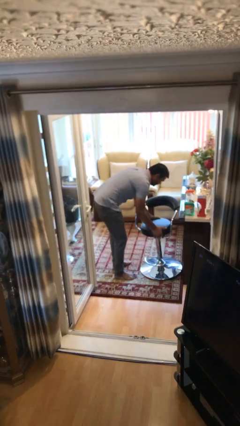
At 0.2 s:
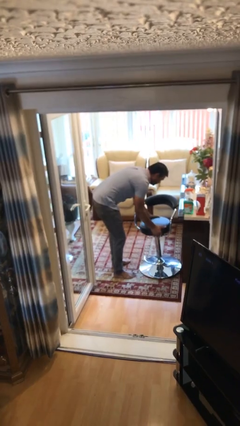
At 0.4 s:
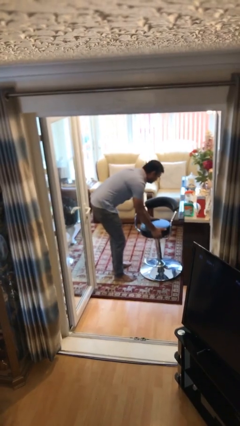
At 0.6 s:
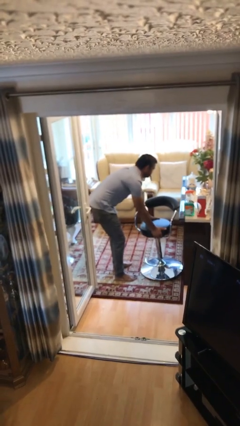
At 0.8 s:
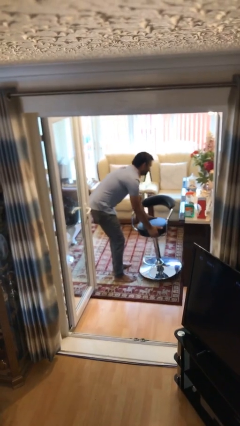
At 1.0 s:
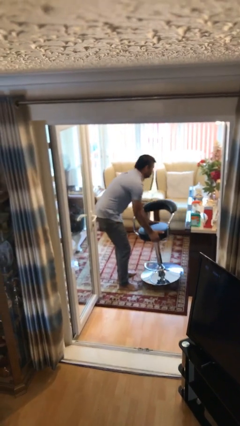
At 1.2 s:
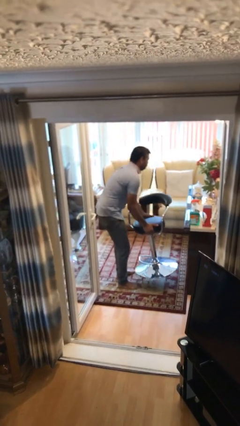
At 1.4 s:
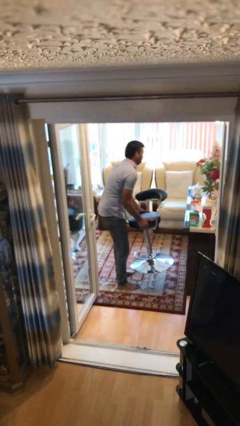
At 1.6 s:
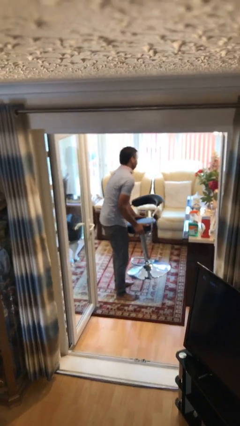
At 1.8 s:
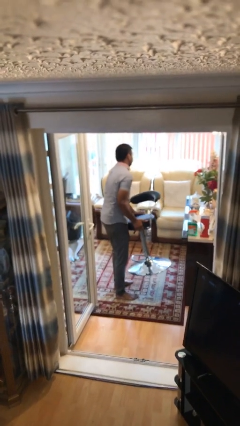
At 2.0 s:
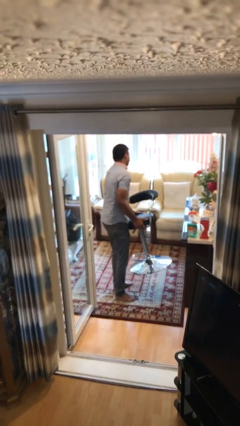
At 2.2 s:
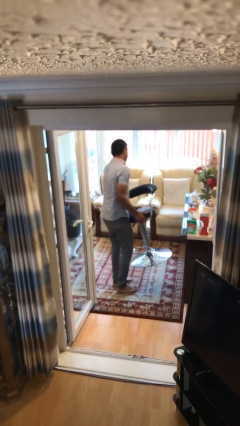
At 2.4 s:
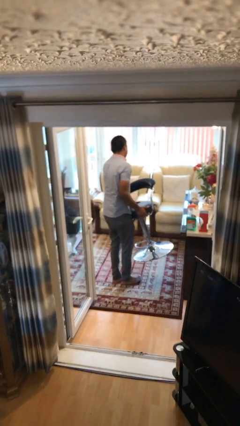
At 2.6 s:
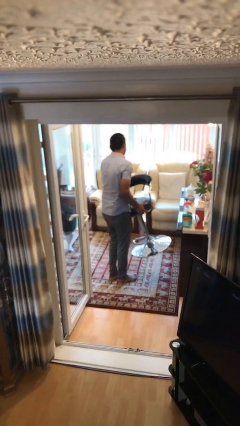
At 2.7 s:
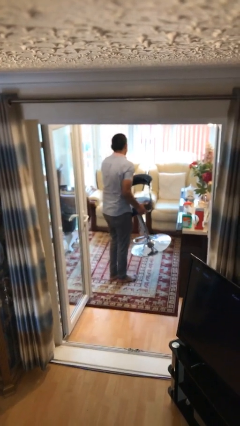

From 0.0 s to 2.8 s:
person picks up object from floor

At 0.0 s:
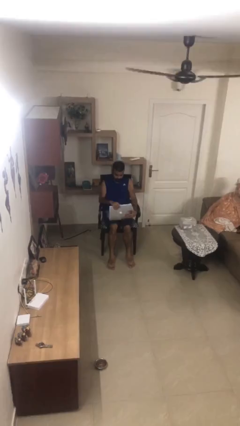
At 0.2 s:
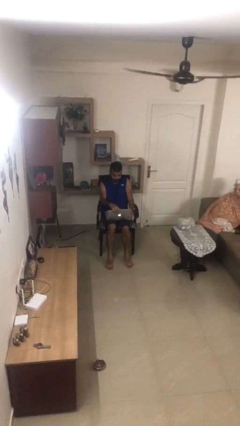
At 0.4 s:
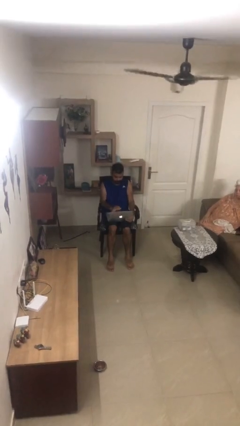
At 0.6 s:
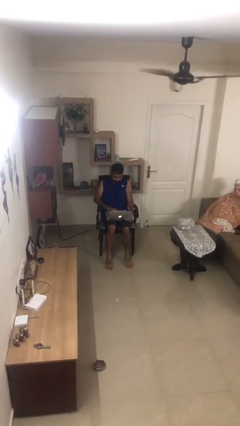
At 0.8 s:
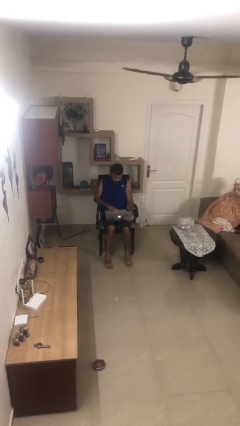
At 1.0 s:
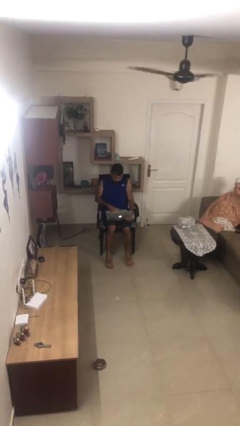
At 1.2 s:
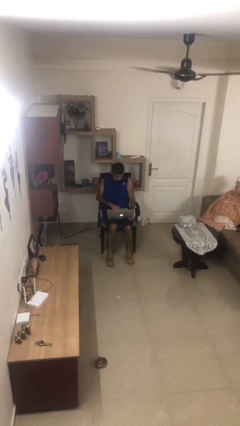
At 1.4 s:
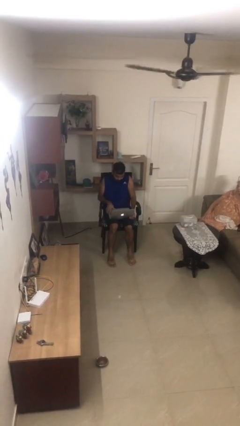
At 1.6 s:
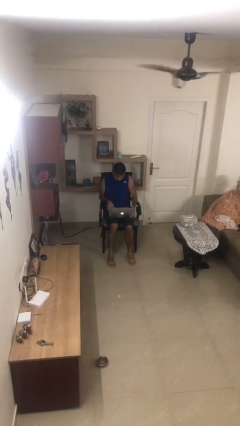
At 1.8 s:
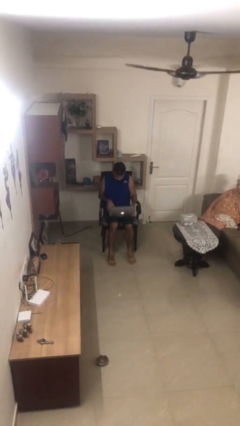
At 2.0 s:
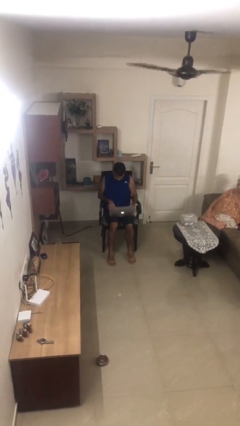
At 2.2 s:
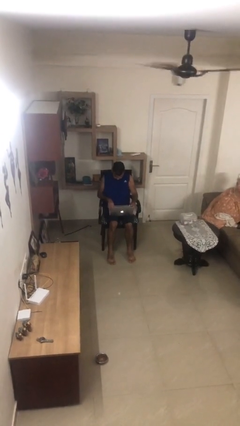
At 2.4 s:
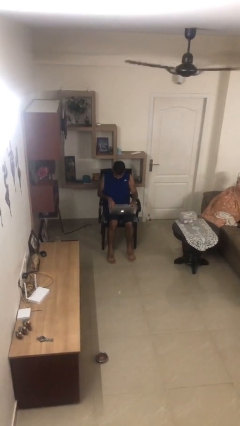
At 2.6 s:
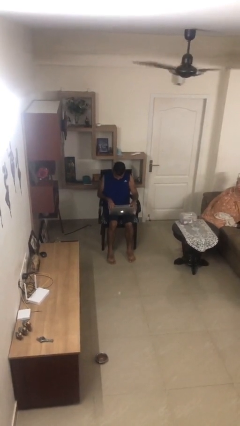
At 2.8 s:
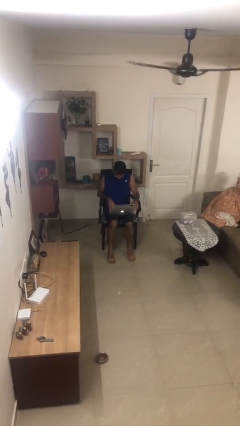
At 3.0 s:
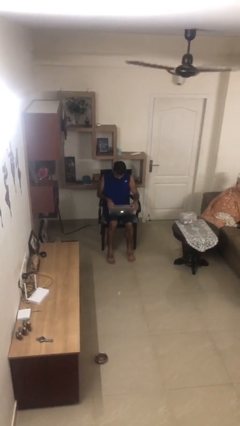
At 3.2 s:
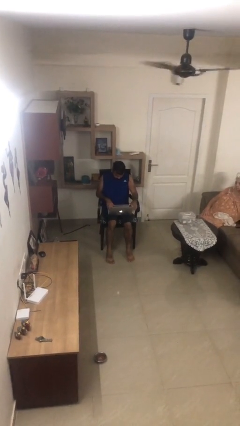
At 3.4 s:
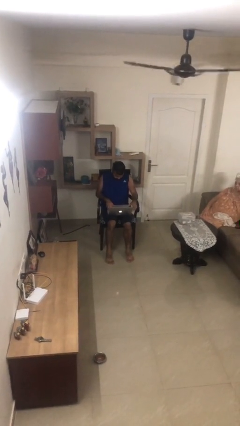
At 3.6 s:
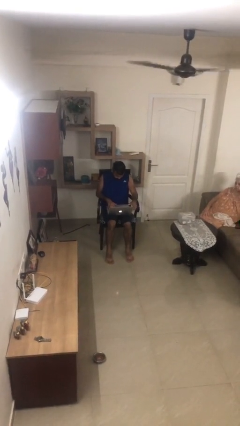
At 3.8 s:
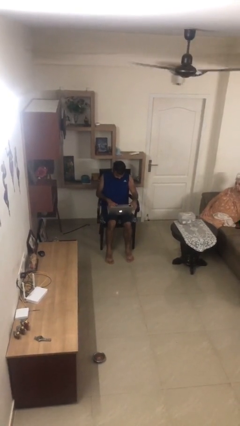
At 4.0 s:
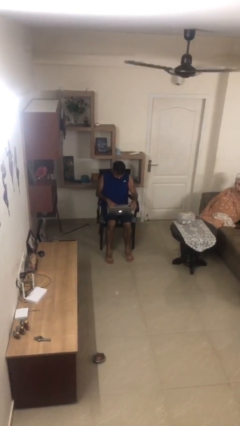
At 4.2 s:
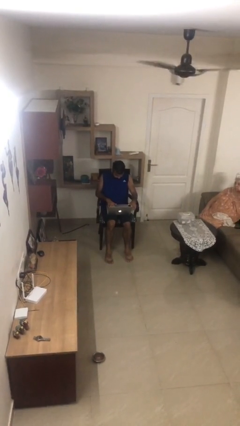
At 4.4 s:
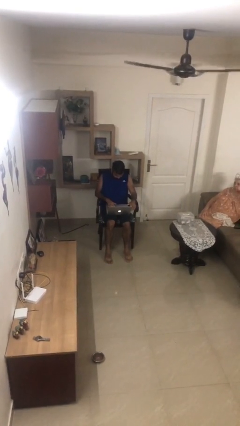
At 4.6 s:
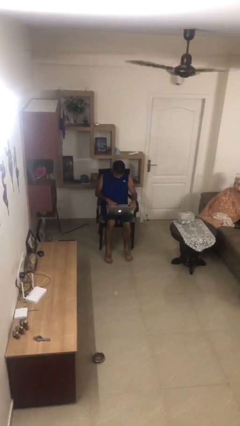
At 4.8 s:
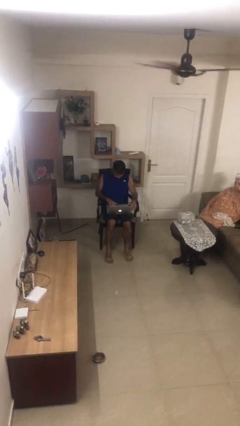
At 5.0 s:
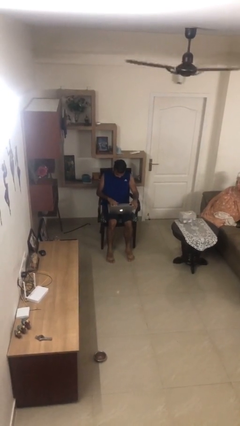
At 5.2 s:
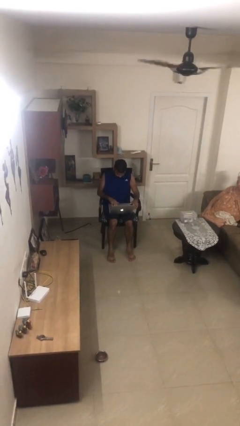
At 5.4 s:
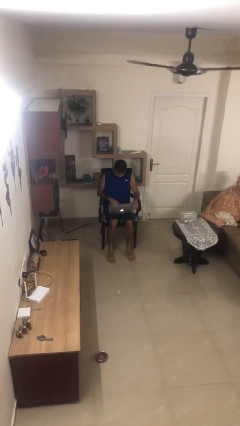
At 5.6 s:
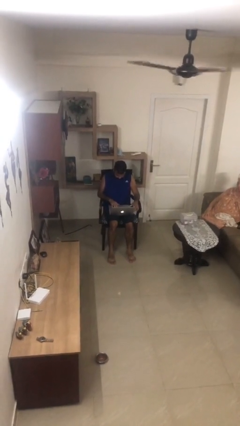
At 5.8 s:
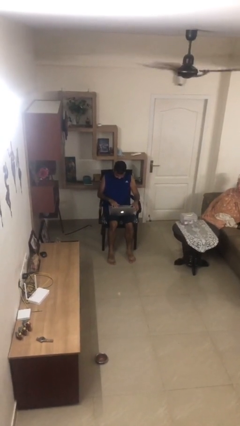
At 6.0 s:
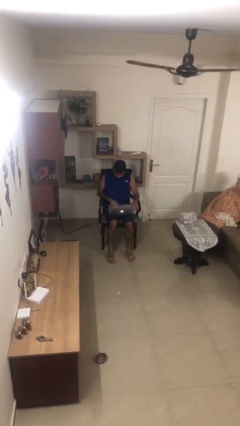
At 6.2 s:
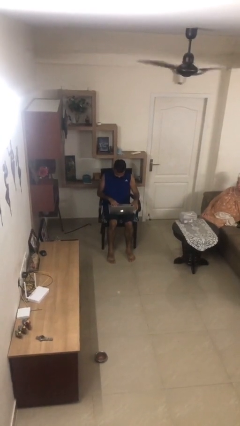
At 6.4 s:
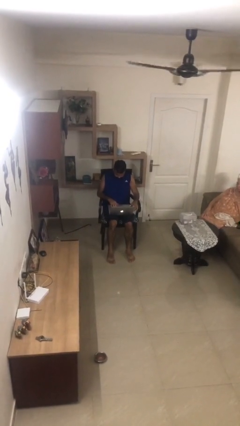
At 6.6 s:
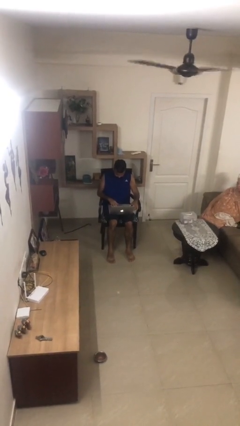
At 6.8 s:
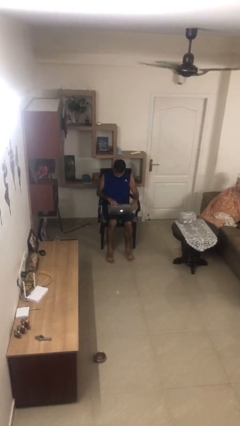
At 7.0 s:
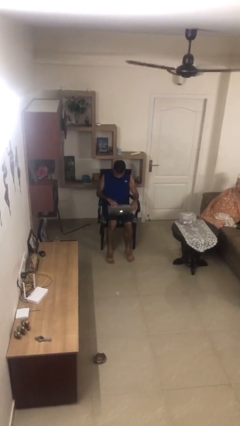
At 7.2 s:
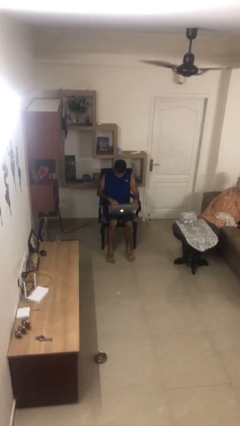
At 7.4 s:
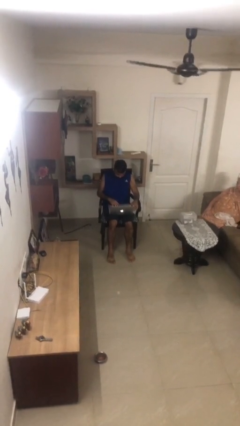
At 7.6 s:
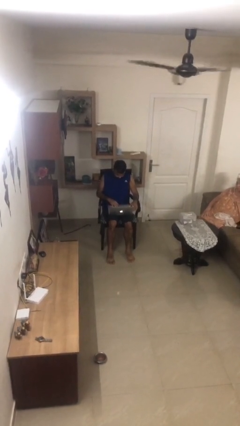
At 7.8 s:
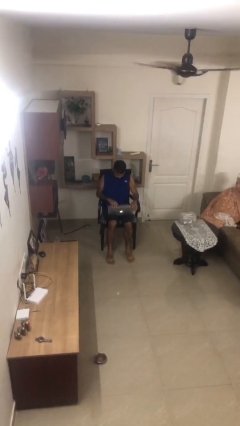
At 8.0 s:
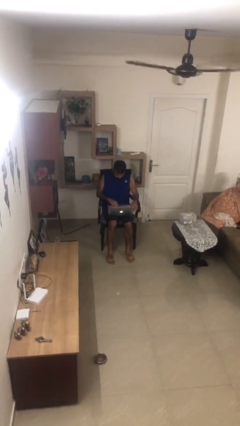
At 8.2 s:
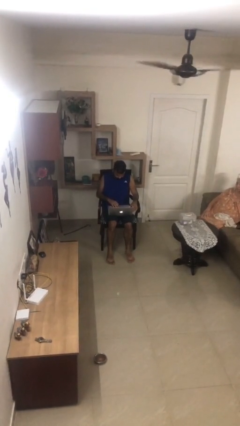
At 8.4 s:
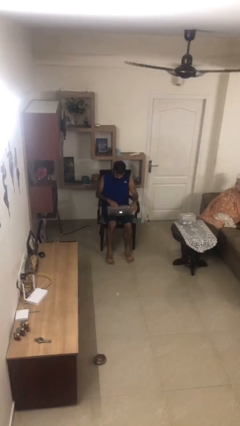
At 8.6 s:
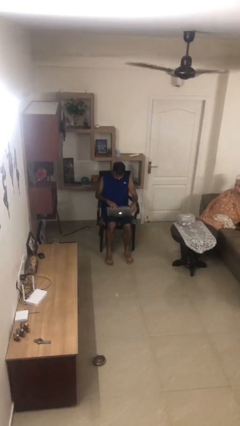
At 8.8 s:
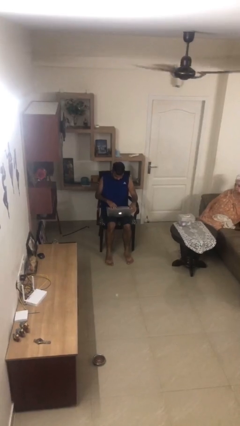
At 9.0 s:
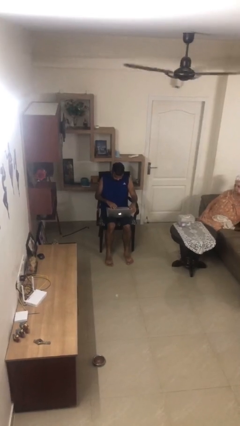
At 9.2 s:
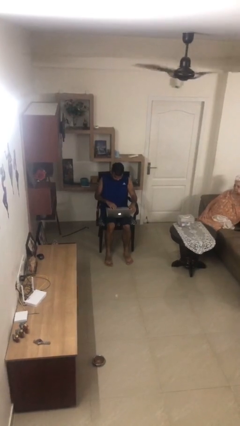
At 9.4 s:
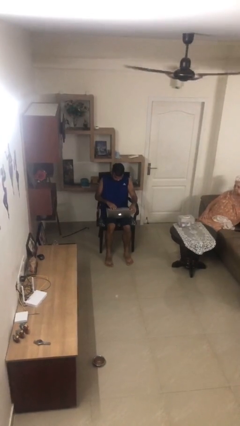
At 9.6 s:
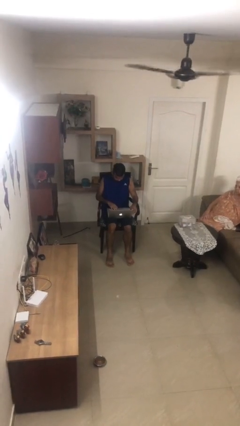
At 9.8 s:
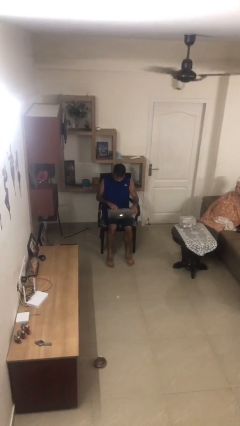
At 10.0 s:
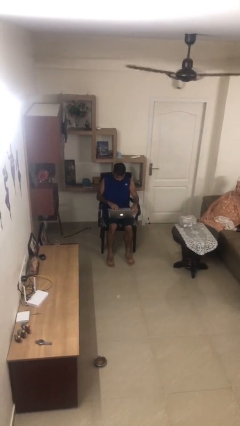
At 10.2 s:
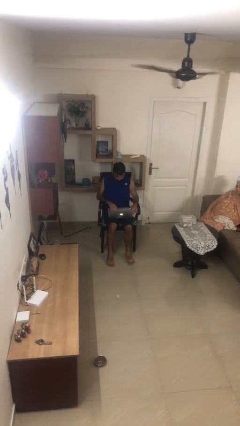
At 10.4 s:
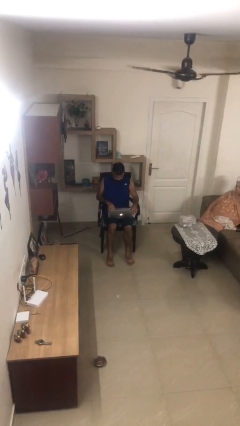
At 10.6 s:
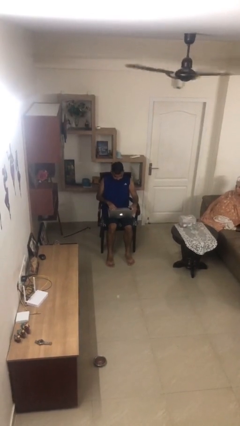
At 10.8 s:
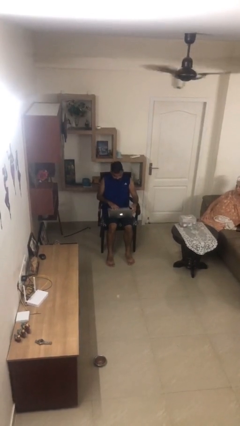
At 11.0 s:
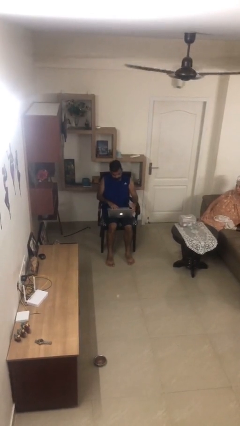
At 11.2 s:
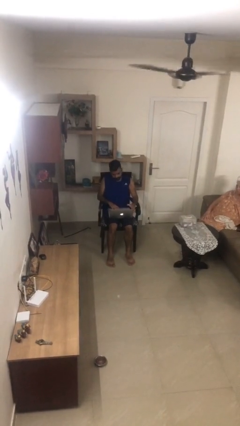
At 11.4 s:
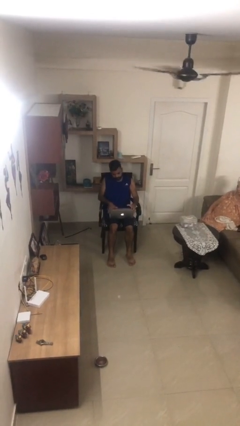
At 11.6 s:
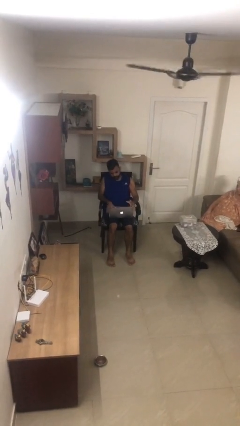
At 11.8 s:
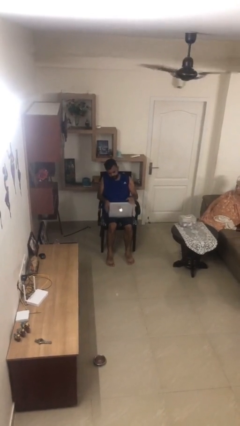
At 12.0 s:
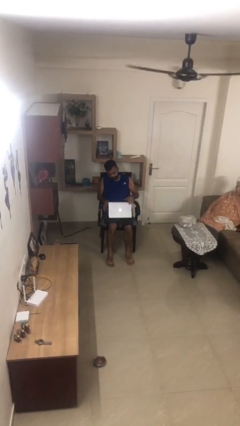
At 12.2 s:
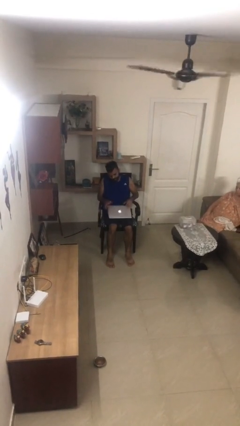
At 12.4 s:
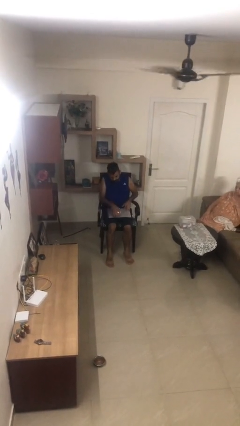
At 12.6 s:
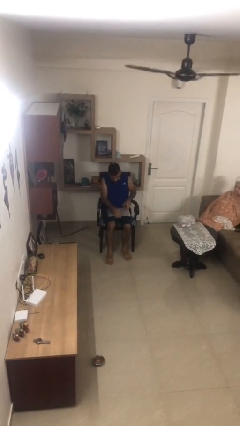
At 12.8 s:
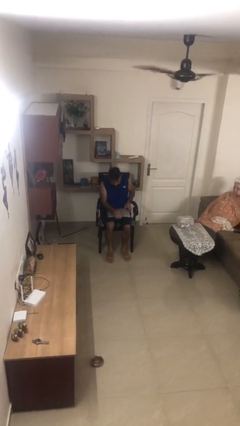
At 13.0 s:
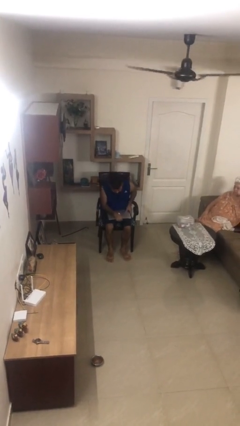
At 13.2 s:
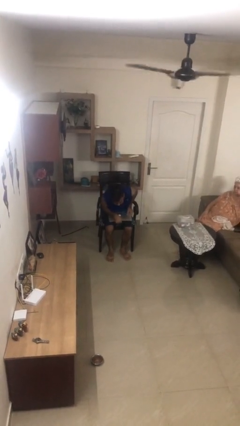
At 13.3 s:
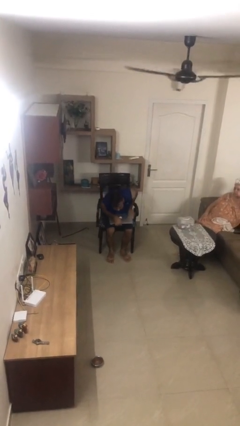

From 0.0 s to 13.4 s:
person interacts with laptop

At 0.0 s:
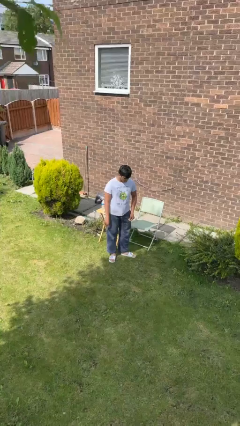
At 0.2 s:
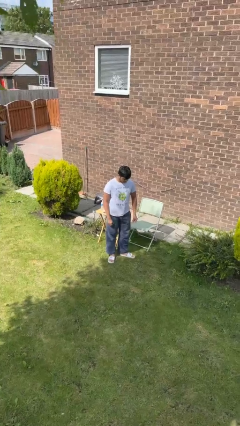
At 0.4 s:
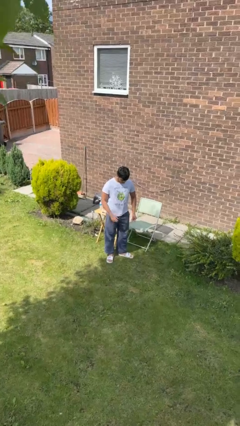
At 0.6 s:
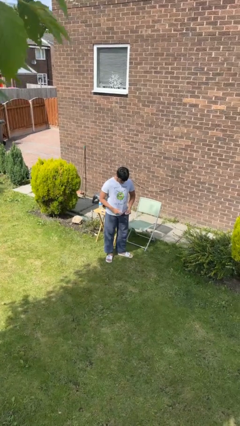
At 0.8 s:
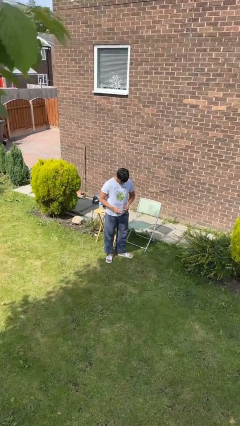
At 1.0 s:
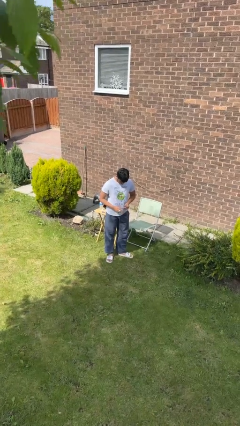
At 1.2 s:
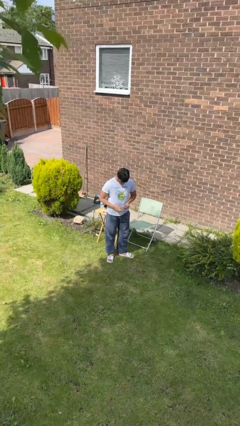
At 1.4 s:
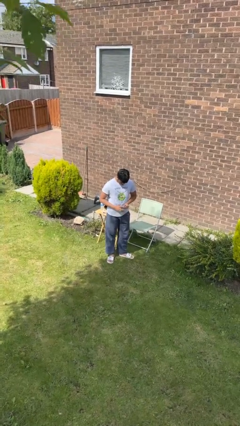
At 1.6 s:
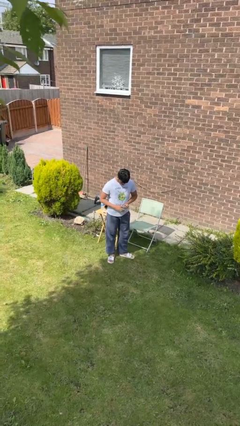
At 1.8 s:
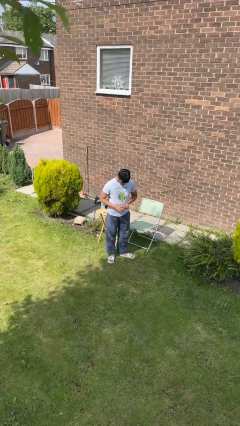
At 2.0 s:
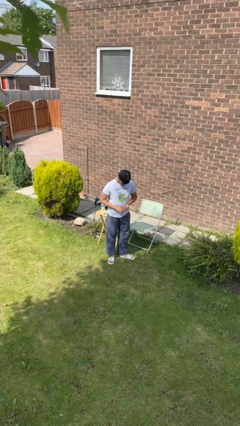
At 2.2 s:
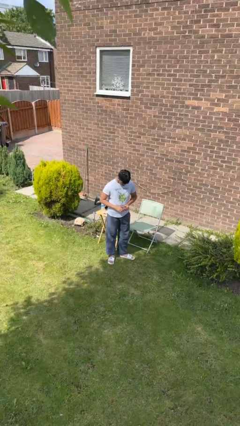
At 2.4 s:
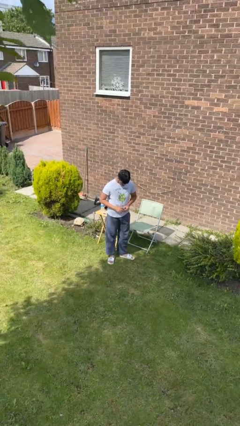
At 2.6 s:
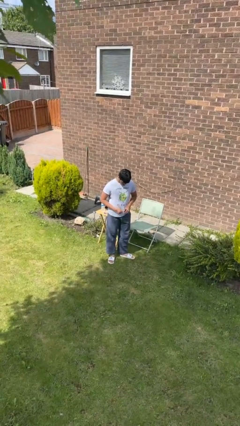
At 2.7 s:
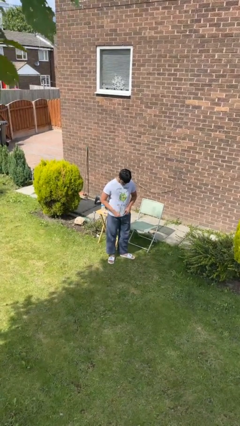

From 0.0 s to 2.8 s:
person puts on ring
